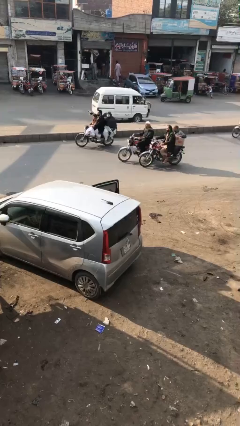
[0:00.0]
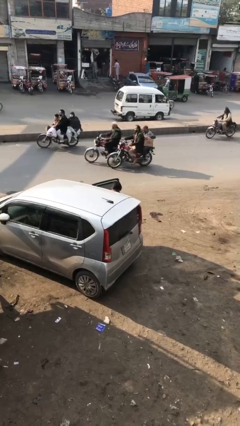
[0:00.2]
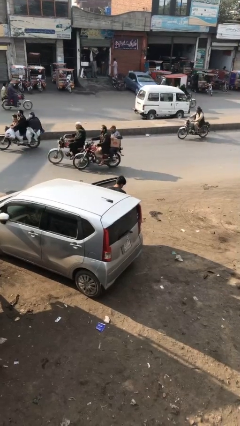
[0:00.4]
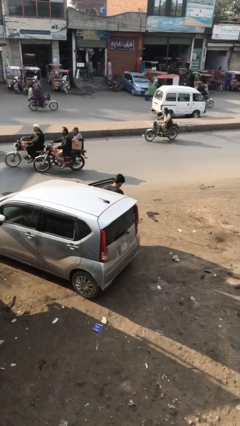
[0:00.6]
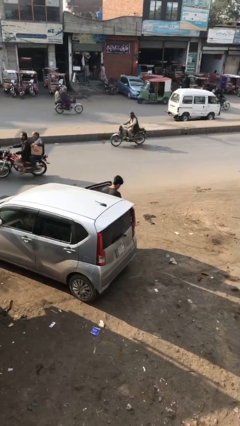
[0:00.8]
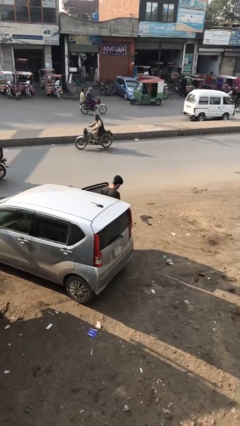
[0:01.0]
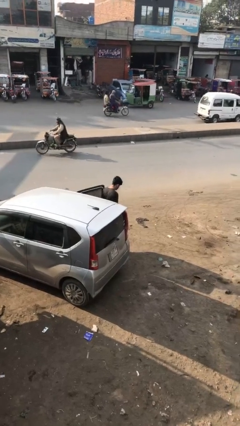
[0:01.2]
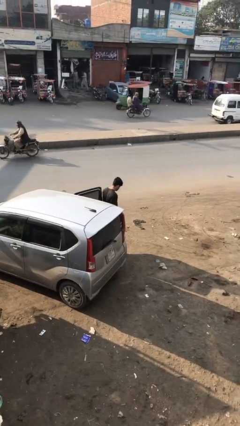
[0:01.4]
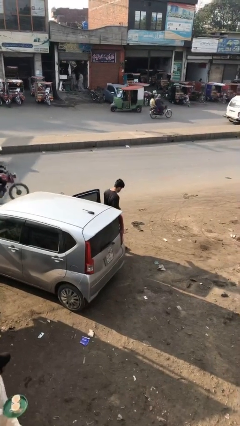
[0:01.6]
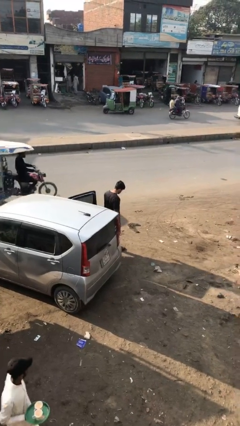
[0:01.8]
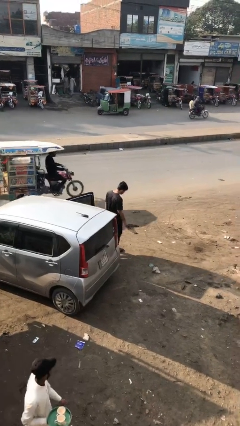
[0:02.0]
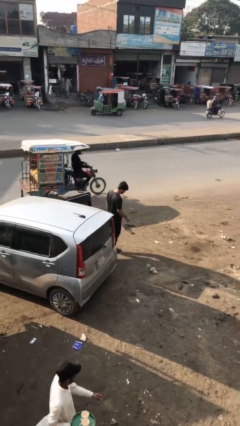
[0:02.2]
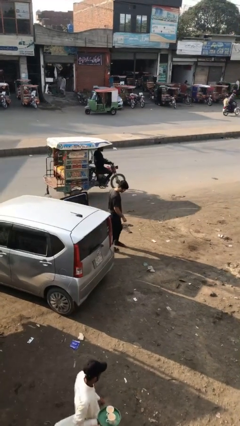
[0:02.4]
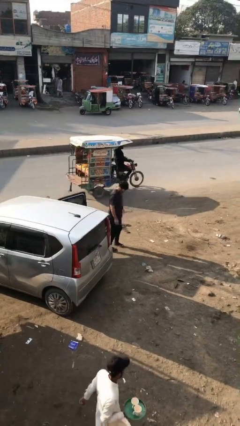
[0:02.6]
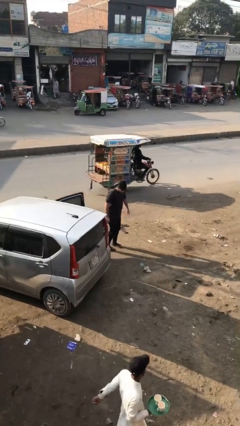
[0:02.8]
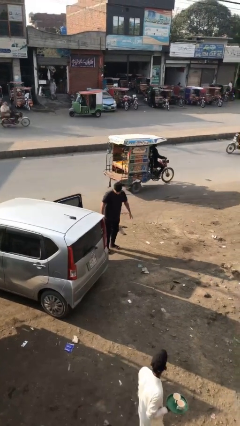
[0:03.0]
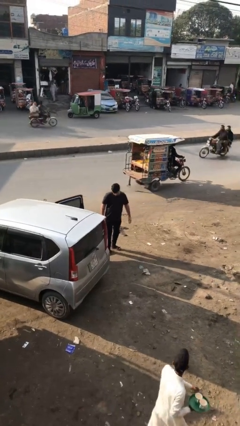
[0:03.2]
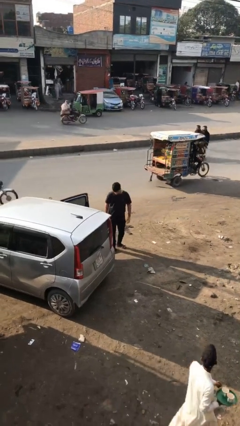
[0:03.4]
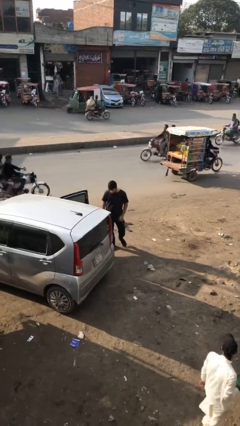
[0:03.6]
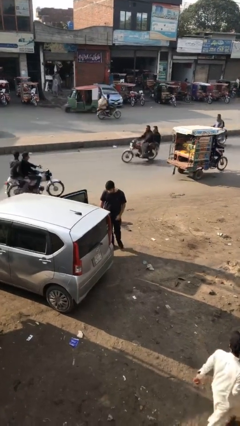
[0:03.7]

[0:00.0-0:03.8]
person exits car

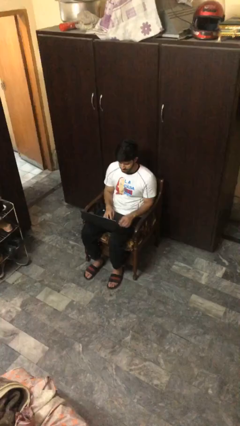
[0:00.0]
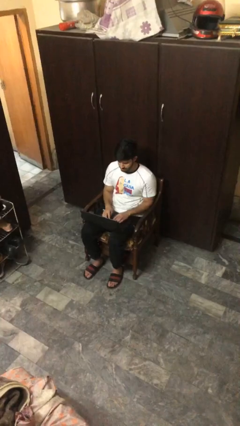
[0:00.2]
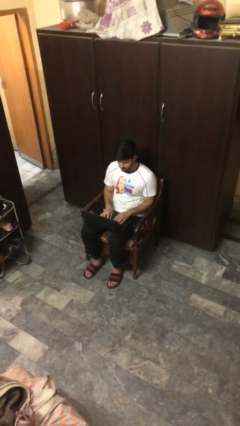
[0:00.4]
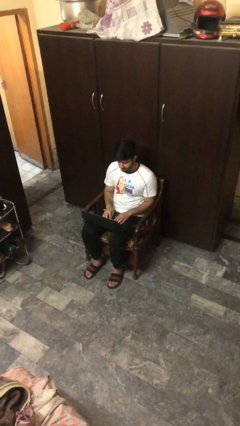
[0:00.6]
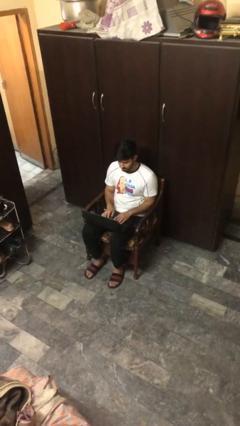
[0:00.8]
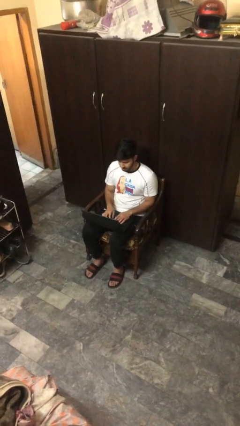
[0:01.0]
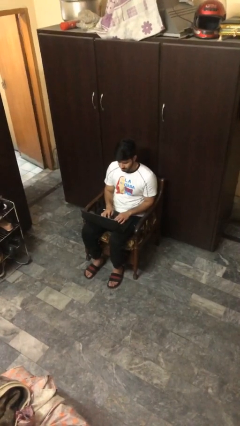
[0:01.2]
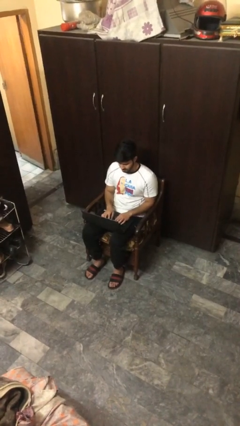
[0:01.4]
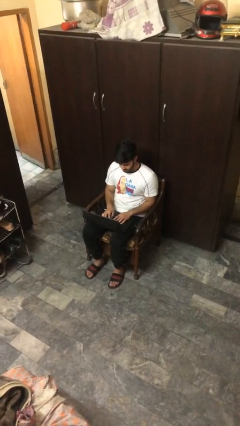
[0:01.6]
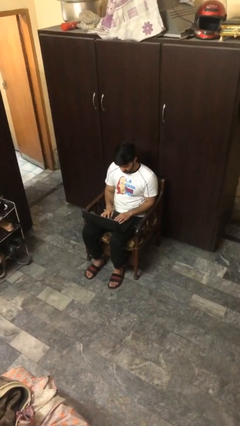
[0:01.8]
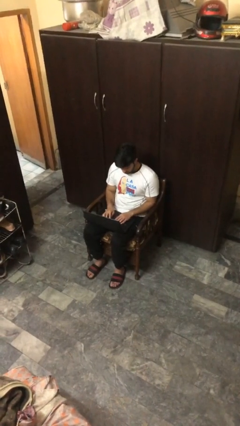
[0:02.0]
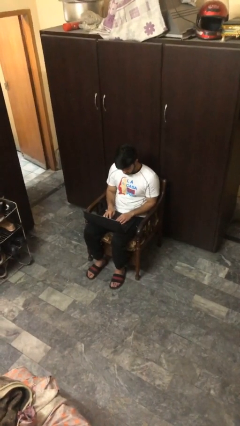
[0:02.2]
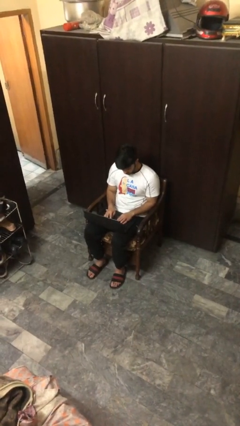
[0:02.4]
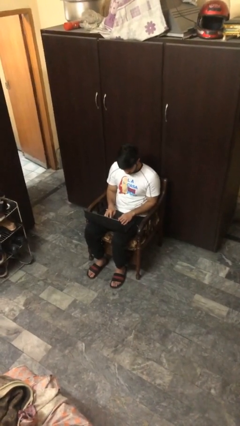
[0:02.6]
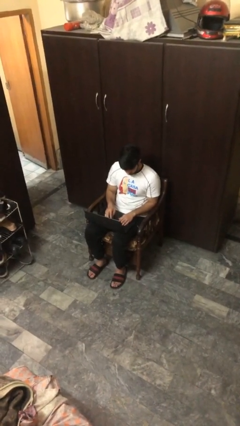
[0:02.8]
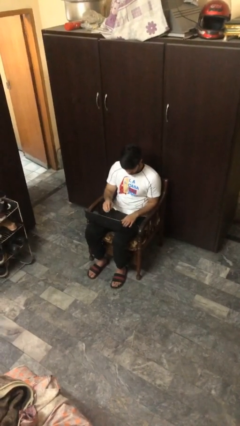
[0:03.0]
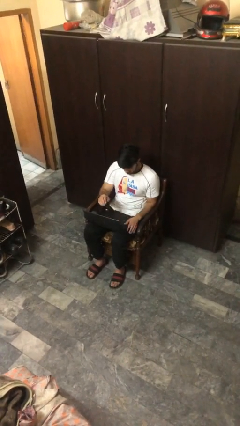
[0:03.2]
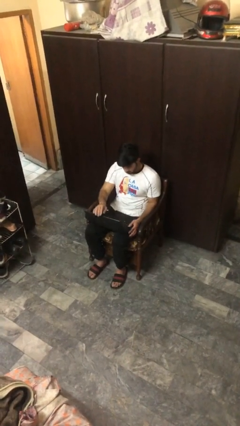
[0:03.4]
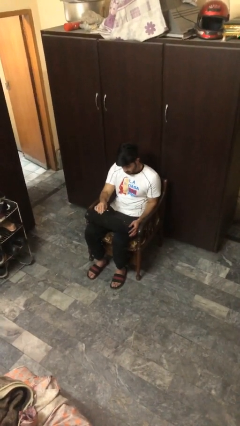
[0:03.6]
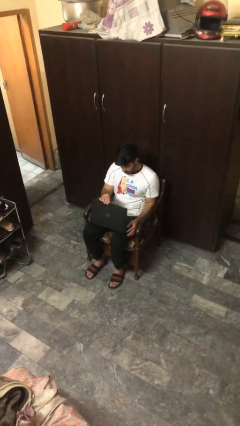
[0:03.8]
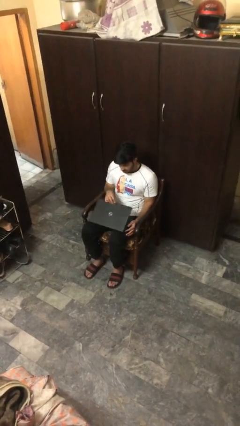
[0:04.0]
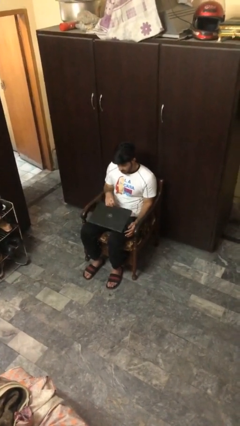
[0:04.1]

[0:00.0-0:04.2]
person interacts with laptop

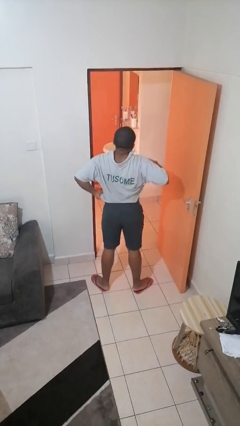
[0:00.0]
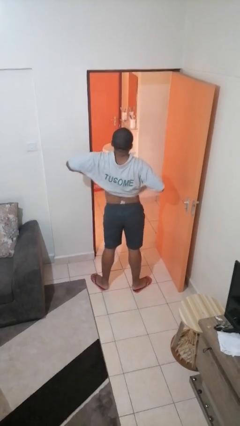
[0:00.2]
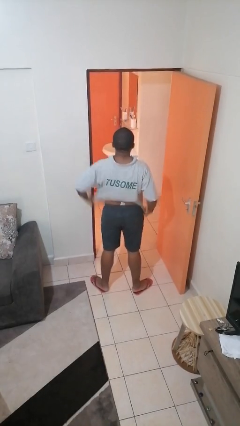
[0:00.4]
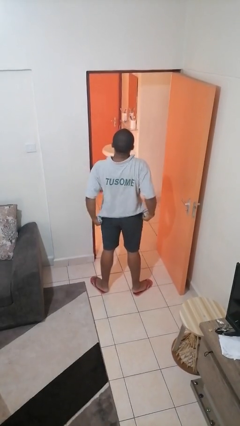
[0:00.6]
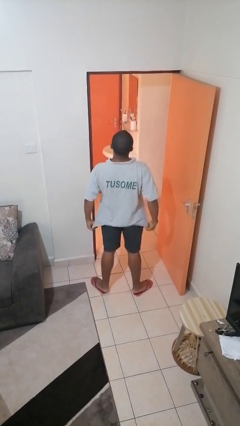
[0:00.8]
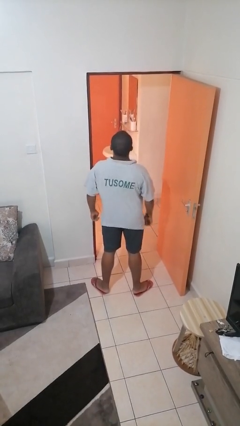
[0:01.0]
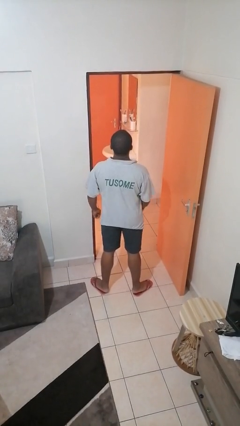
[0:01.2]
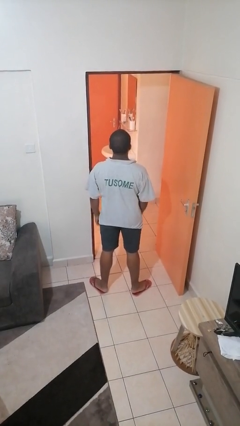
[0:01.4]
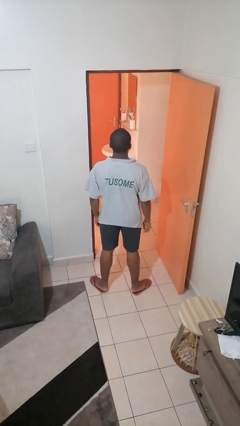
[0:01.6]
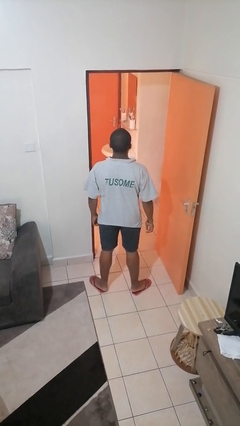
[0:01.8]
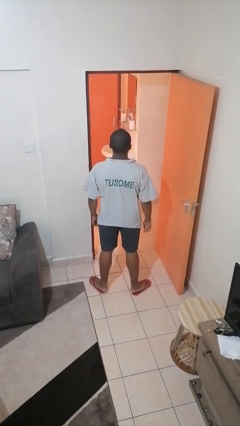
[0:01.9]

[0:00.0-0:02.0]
person untucks shirt

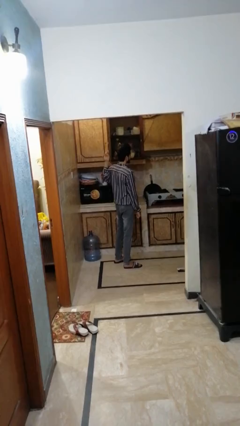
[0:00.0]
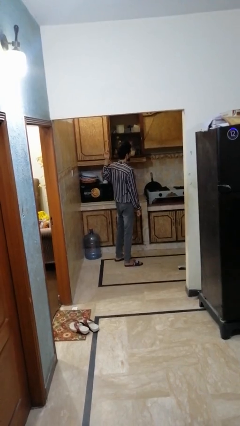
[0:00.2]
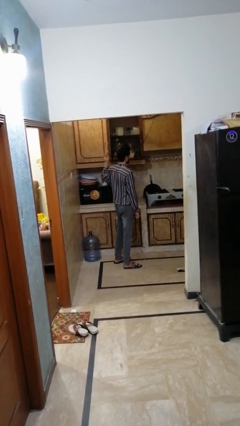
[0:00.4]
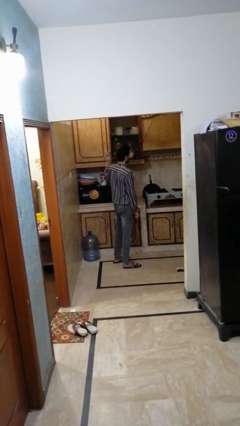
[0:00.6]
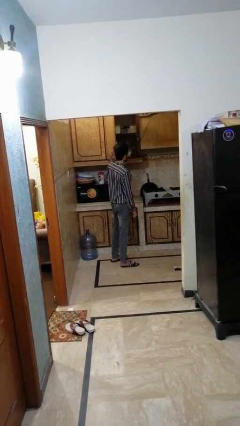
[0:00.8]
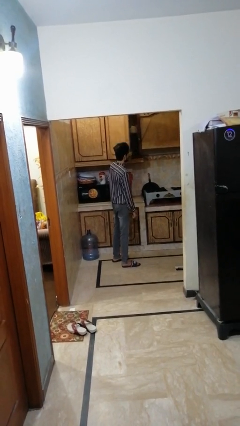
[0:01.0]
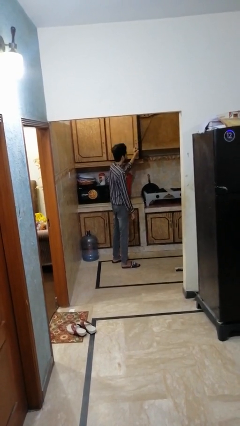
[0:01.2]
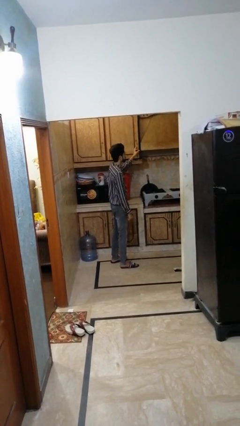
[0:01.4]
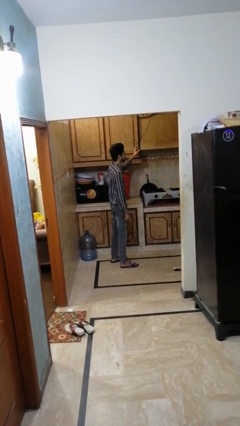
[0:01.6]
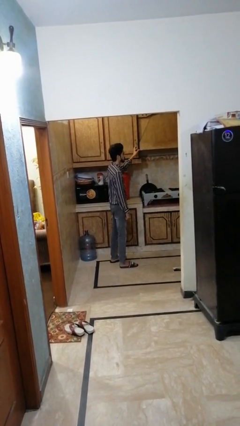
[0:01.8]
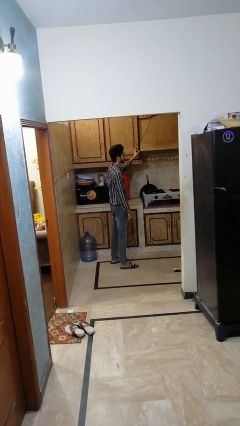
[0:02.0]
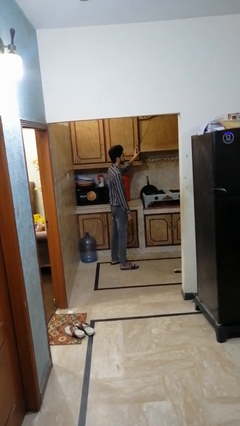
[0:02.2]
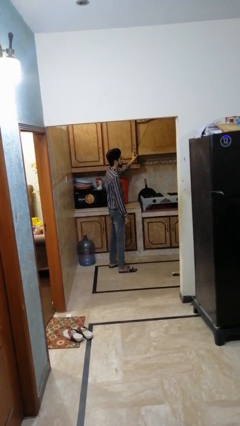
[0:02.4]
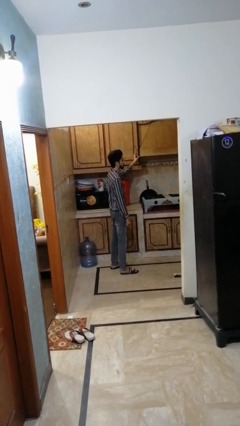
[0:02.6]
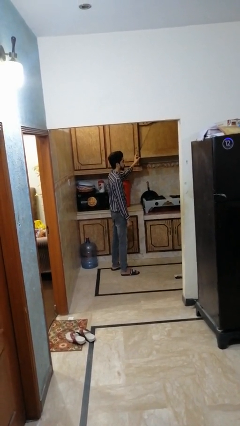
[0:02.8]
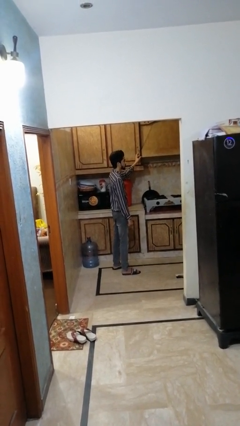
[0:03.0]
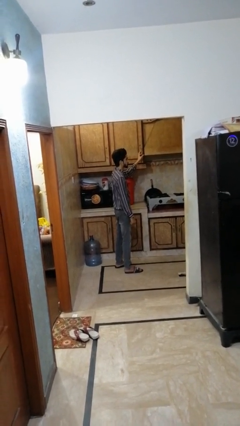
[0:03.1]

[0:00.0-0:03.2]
person closes cabinet

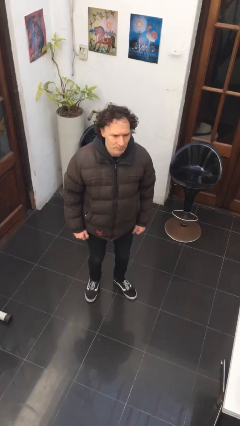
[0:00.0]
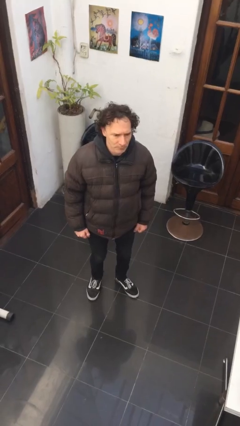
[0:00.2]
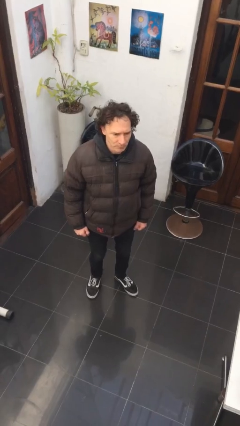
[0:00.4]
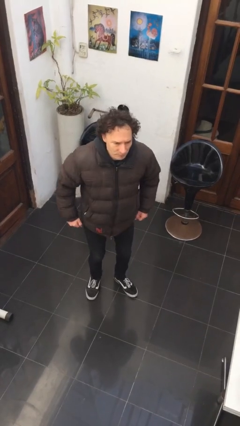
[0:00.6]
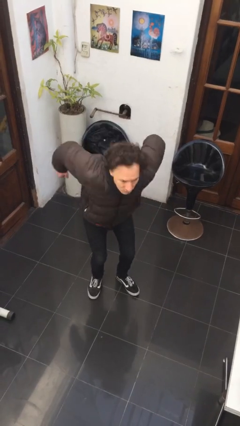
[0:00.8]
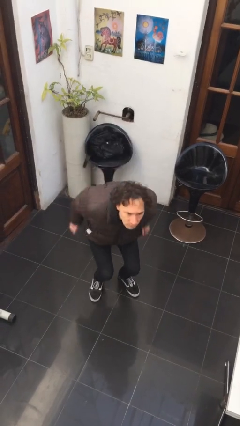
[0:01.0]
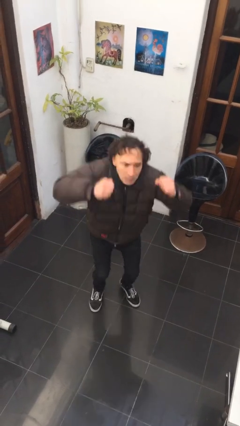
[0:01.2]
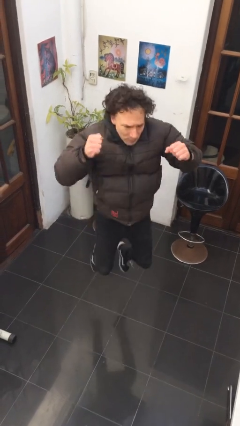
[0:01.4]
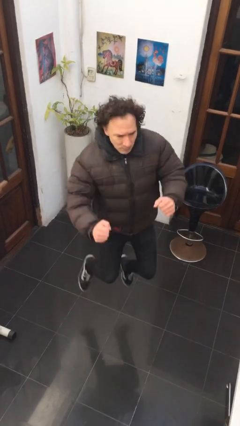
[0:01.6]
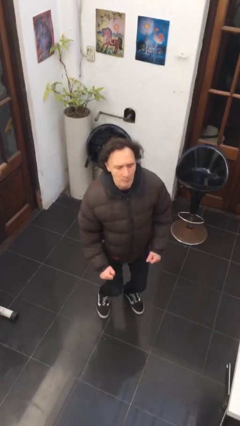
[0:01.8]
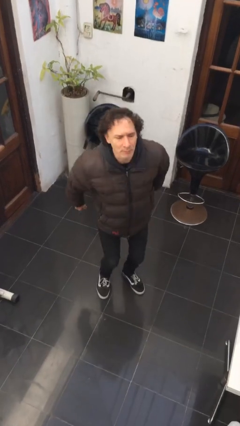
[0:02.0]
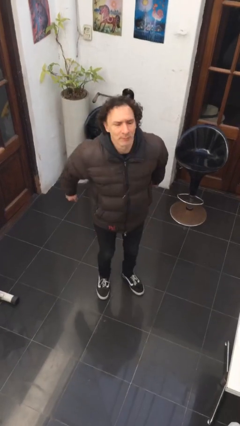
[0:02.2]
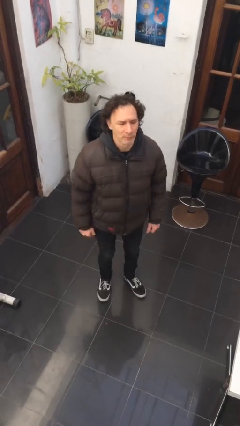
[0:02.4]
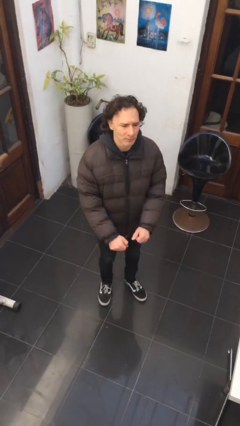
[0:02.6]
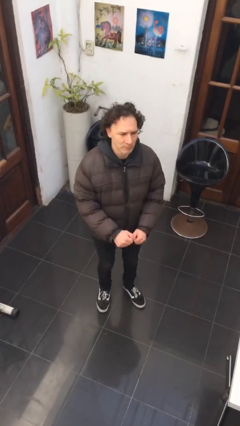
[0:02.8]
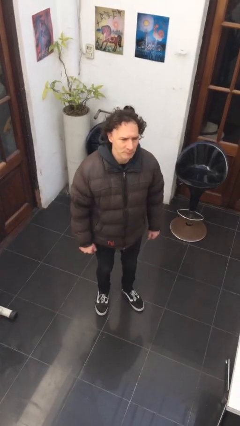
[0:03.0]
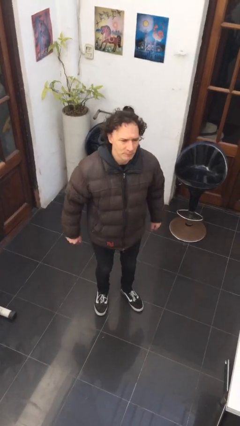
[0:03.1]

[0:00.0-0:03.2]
person jumps

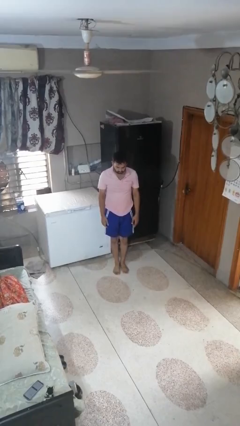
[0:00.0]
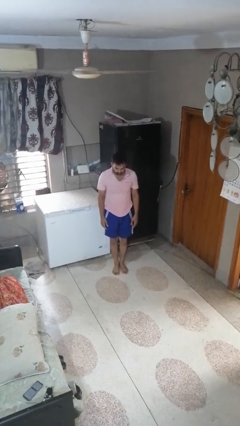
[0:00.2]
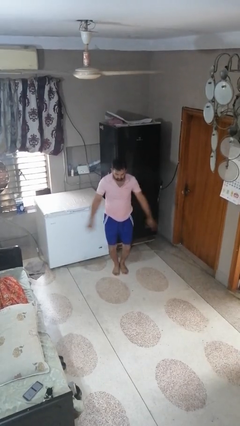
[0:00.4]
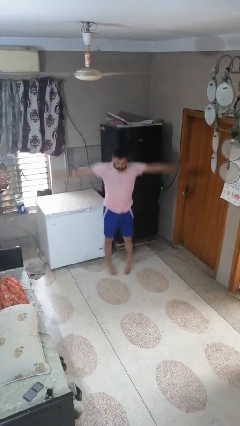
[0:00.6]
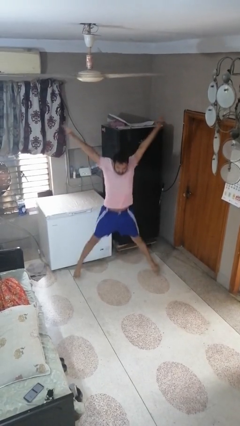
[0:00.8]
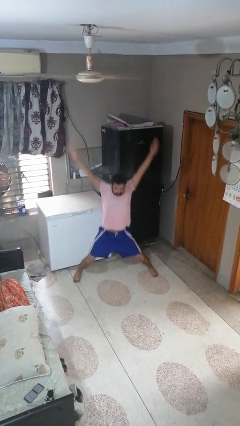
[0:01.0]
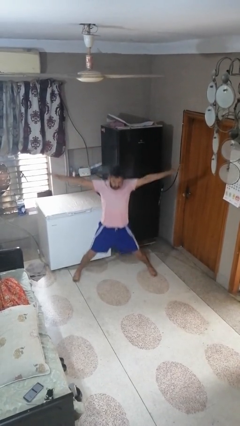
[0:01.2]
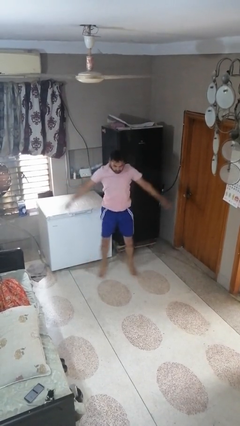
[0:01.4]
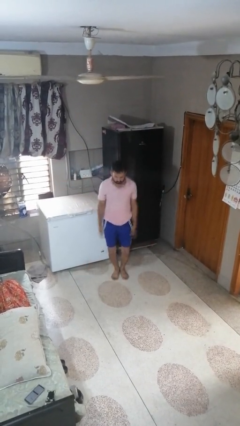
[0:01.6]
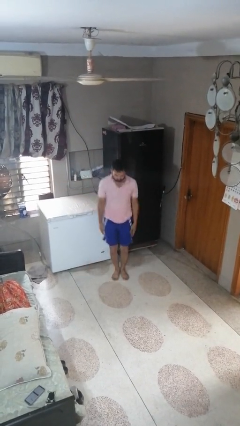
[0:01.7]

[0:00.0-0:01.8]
person exercises with jumping jacks
